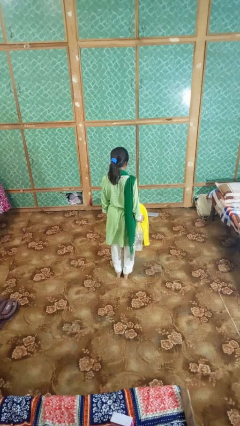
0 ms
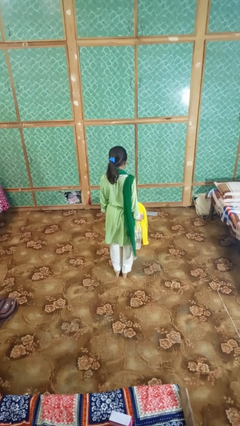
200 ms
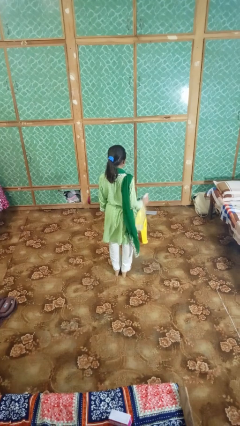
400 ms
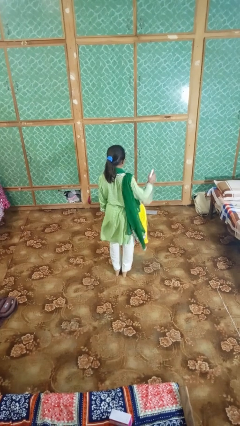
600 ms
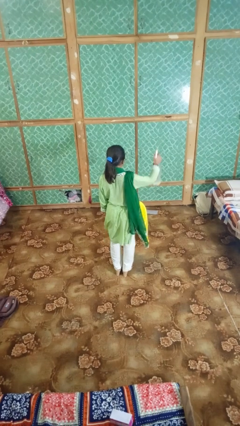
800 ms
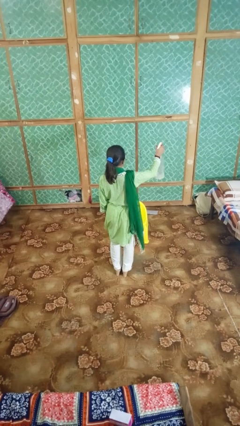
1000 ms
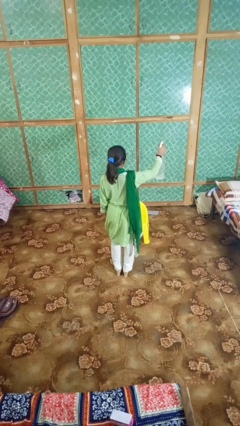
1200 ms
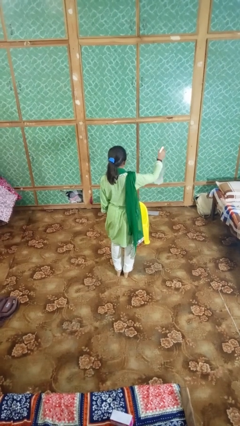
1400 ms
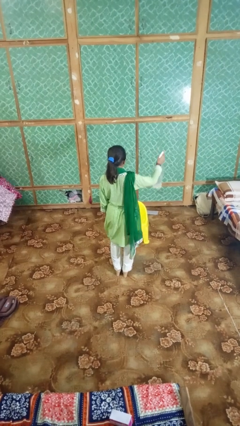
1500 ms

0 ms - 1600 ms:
person sprays from bottle

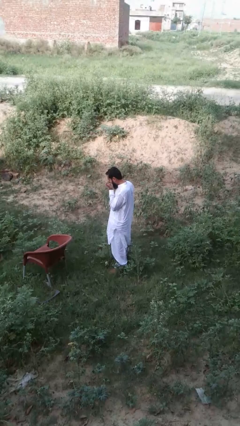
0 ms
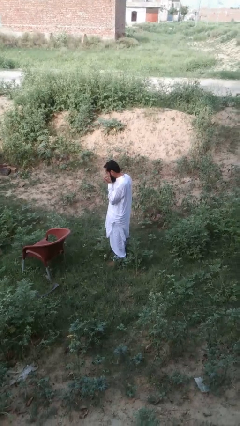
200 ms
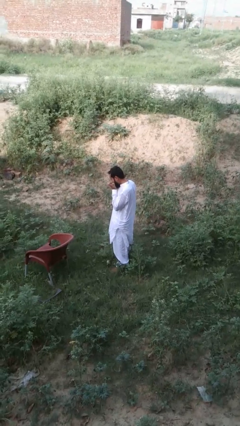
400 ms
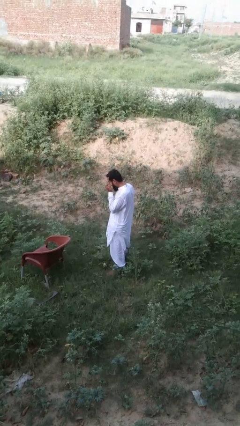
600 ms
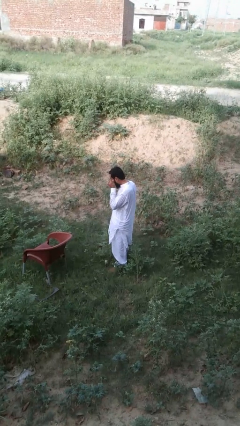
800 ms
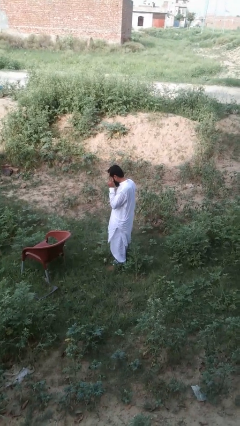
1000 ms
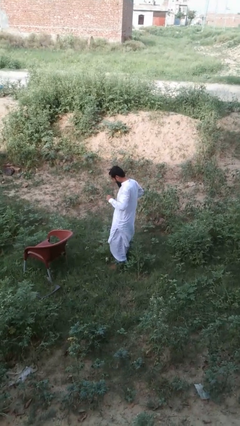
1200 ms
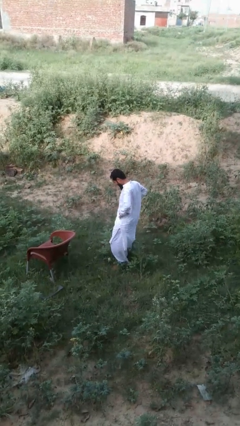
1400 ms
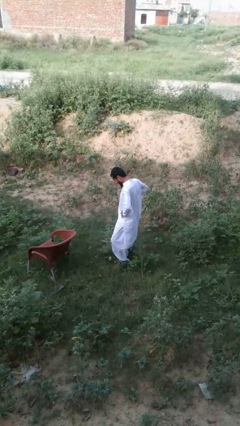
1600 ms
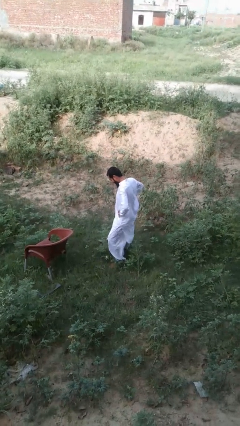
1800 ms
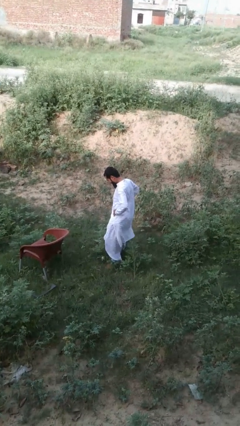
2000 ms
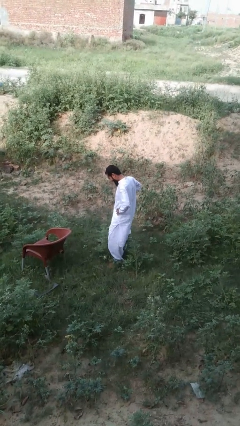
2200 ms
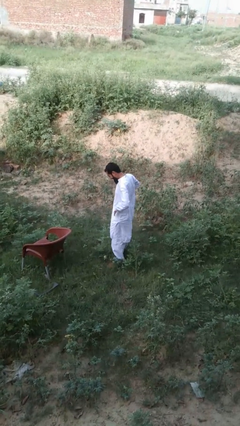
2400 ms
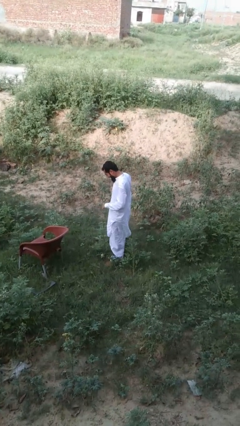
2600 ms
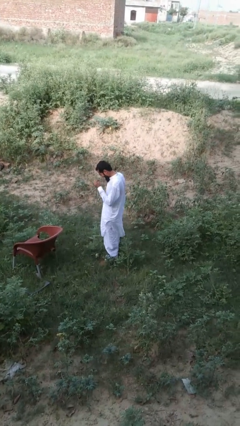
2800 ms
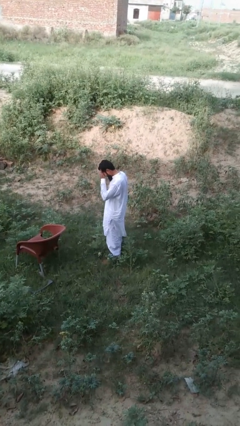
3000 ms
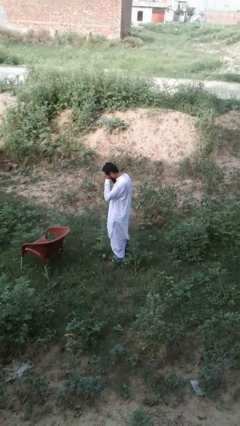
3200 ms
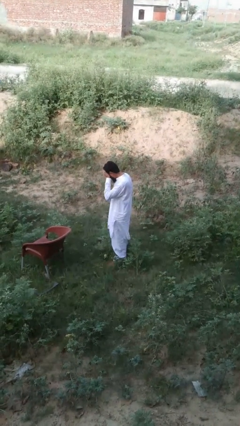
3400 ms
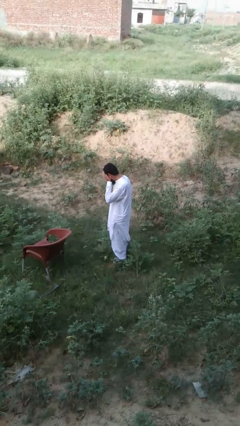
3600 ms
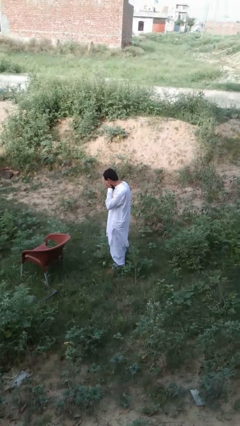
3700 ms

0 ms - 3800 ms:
person wiggles hips

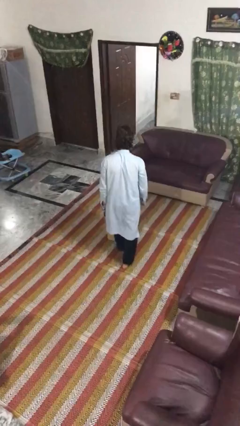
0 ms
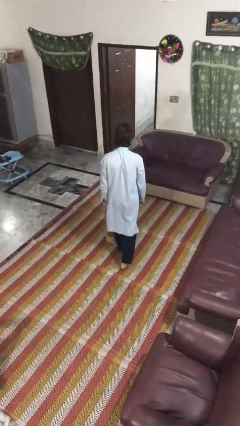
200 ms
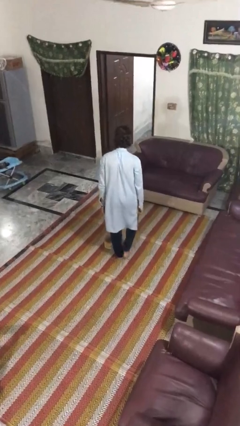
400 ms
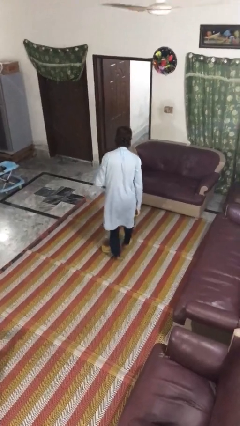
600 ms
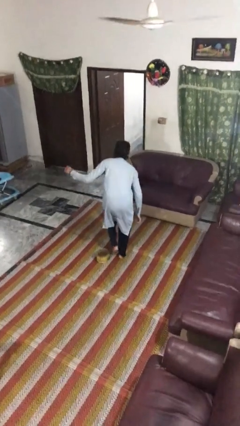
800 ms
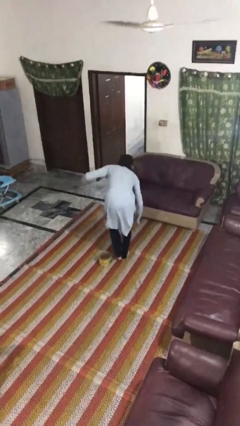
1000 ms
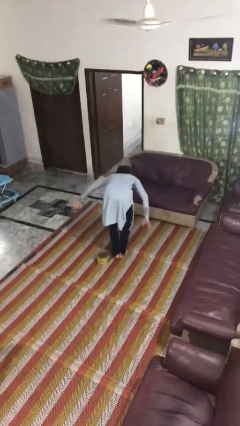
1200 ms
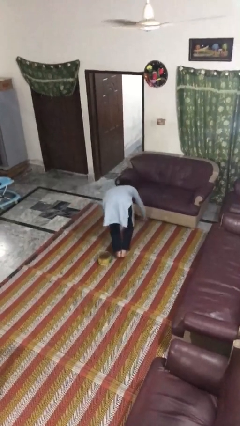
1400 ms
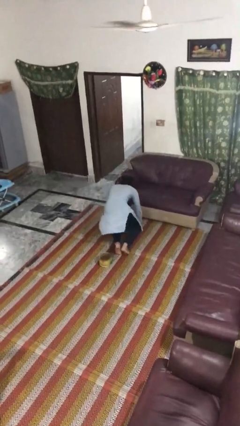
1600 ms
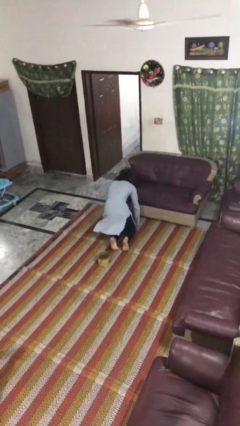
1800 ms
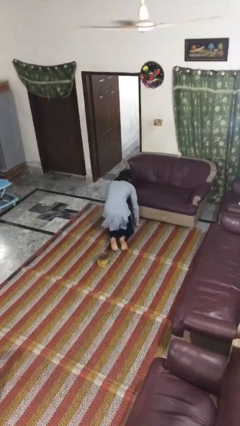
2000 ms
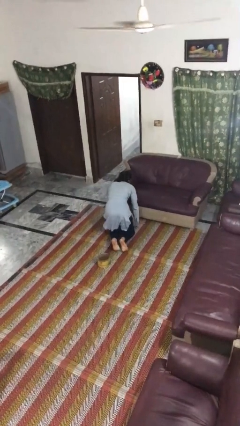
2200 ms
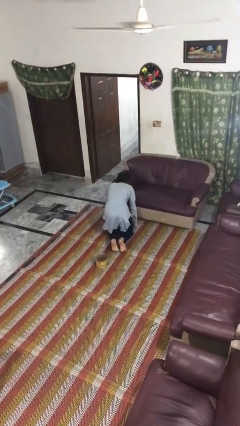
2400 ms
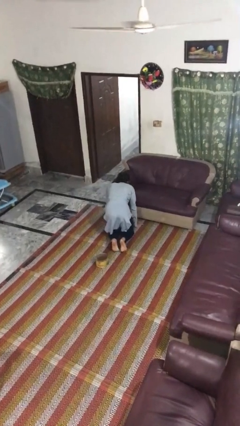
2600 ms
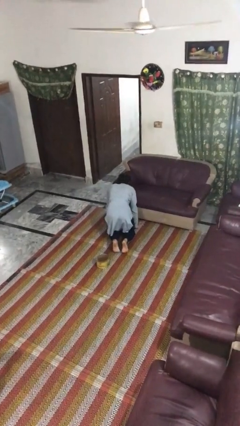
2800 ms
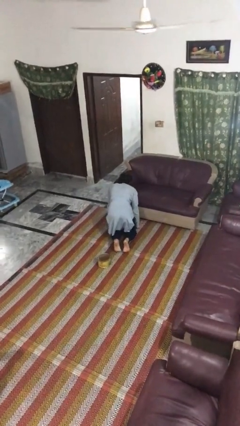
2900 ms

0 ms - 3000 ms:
person trips on object on floor

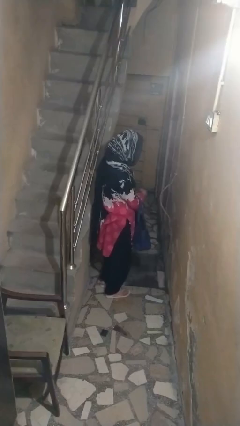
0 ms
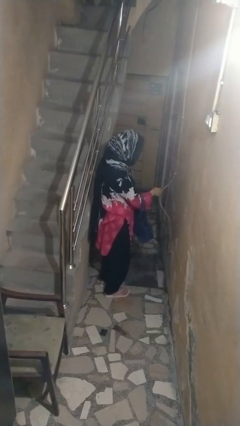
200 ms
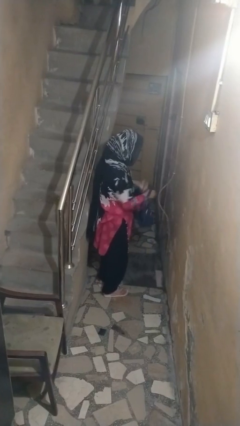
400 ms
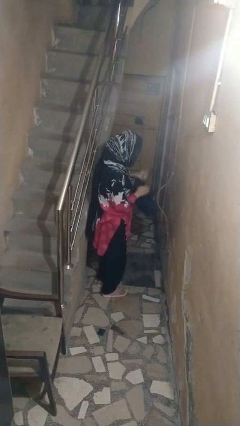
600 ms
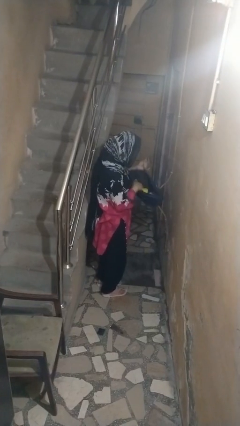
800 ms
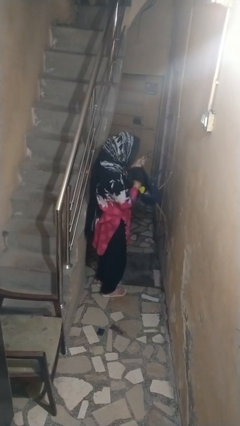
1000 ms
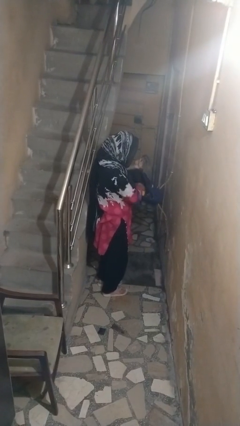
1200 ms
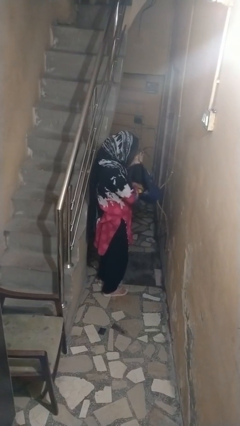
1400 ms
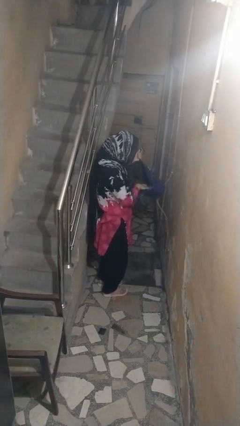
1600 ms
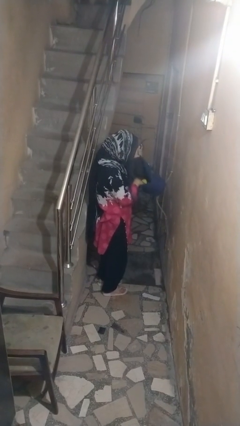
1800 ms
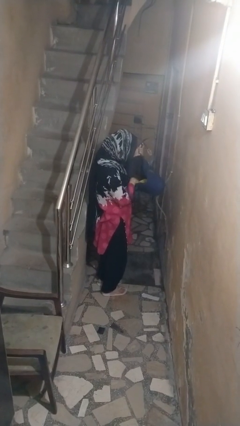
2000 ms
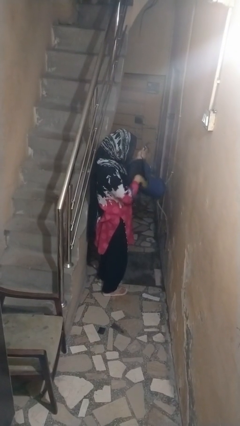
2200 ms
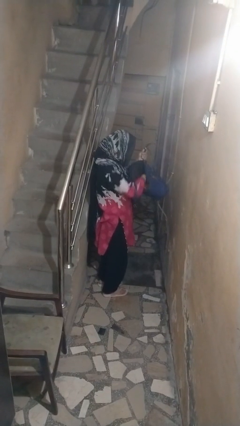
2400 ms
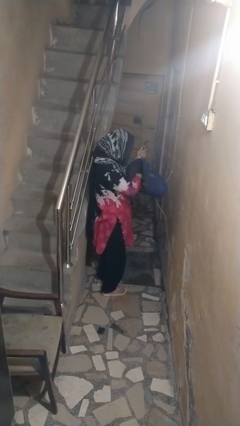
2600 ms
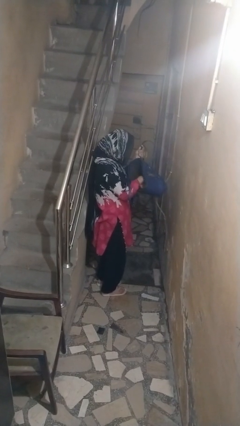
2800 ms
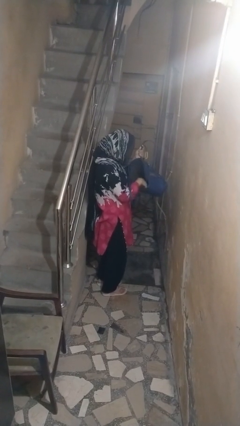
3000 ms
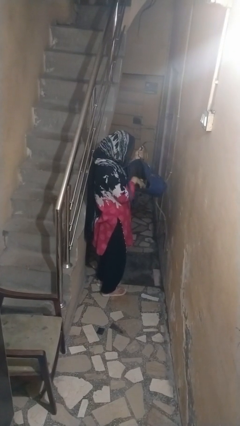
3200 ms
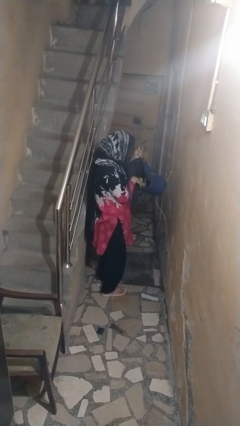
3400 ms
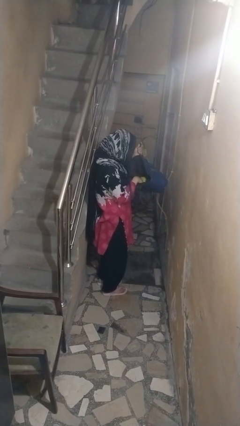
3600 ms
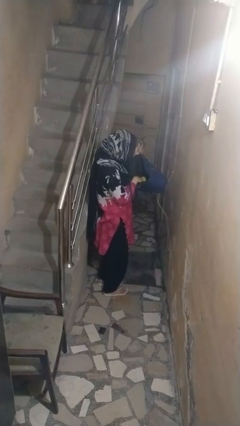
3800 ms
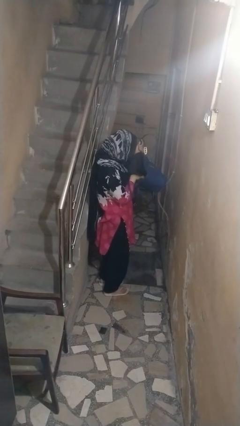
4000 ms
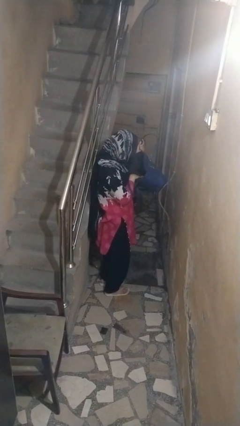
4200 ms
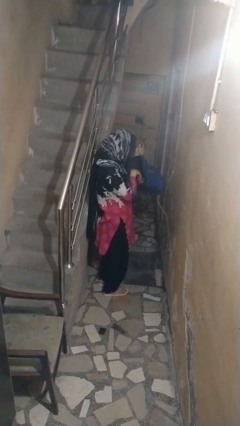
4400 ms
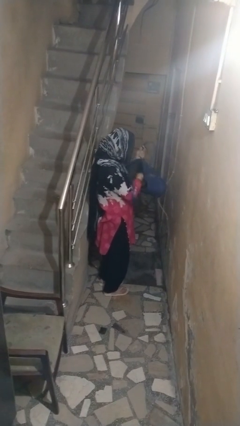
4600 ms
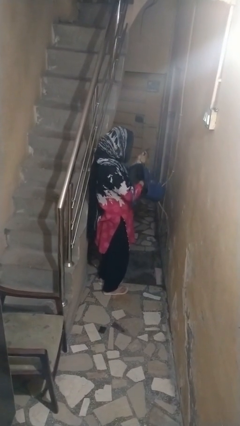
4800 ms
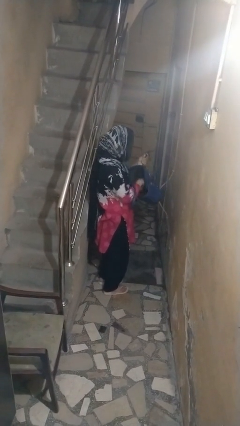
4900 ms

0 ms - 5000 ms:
person searches in purse

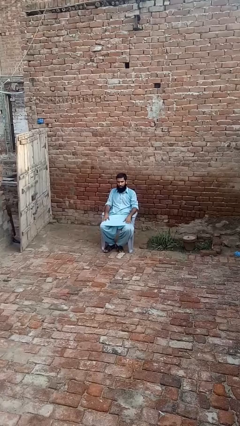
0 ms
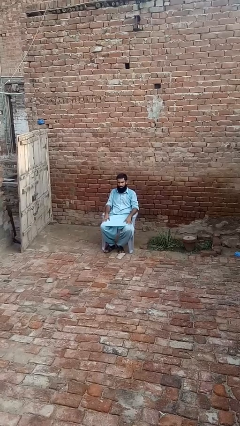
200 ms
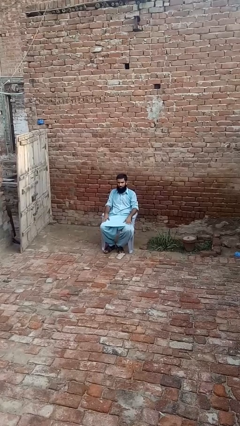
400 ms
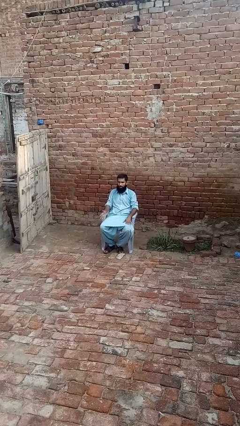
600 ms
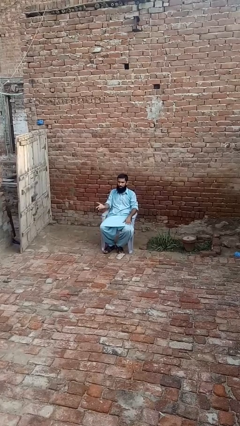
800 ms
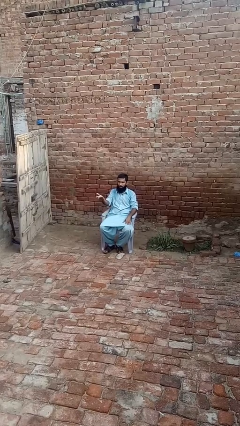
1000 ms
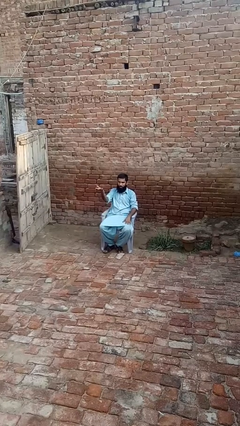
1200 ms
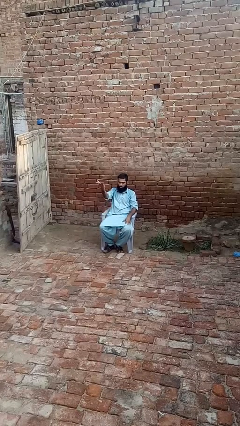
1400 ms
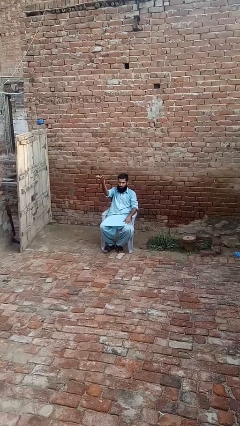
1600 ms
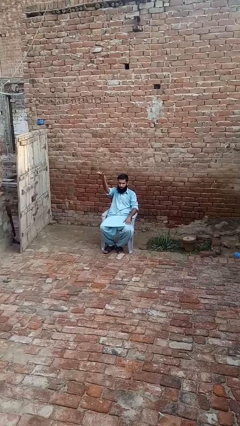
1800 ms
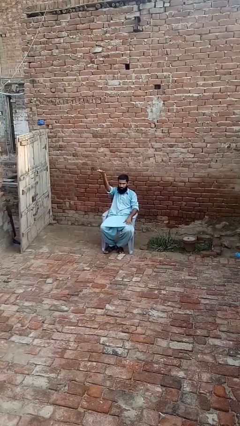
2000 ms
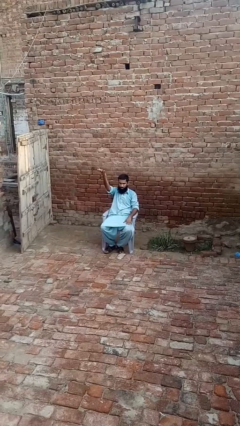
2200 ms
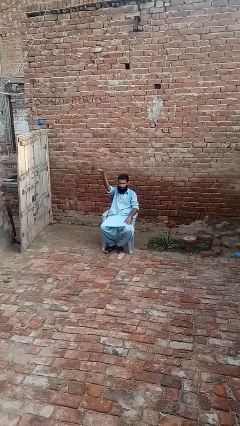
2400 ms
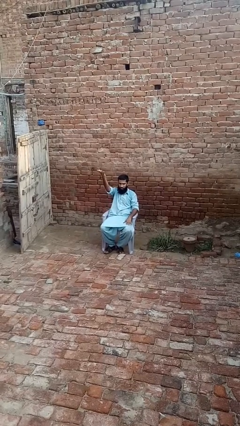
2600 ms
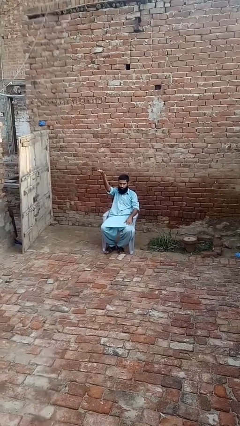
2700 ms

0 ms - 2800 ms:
person gestures swipe up

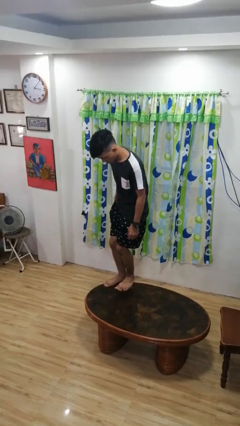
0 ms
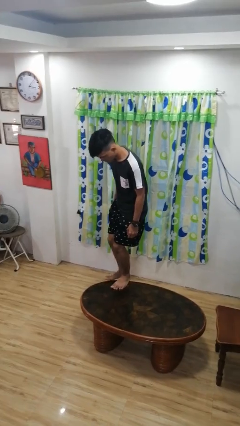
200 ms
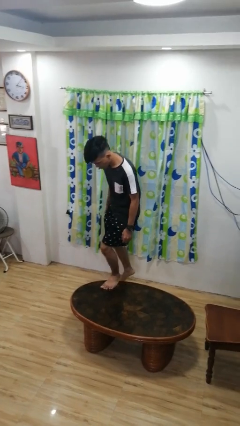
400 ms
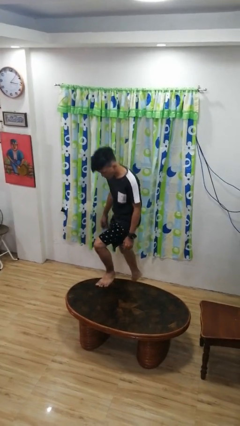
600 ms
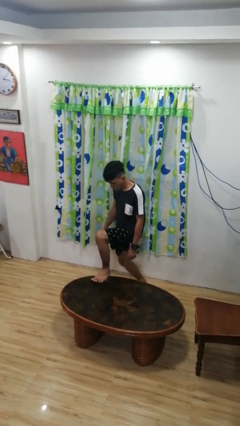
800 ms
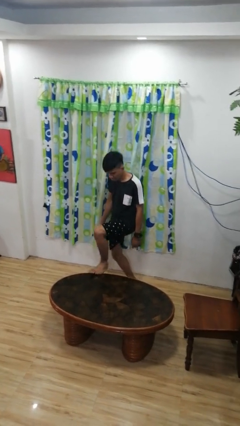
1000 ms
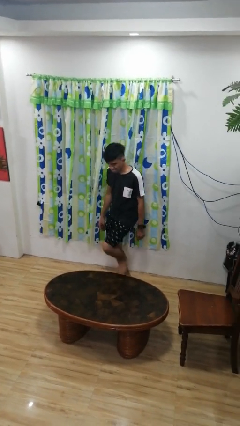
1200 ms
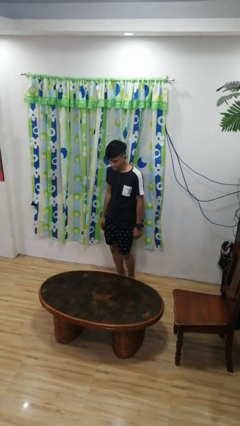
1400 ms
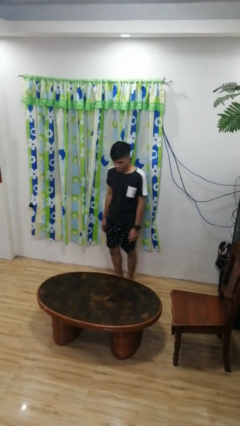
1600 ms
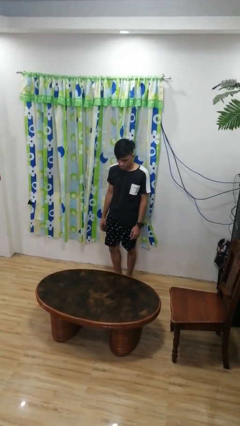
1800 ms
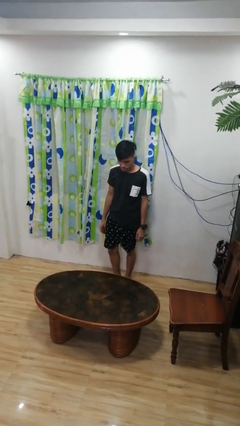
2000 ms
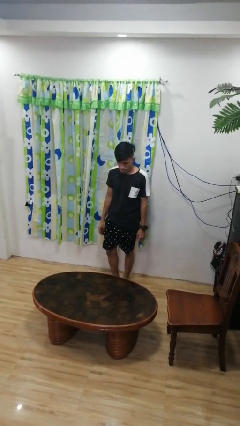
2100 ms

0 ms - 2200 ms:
person climbs off table
